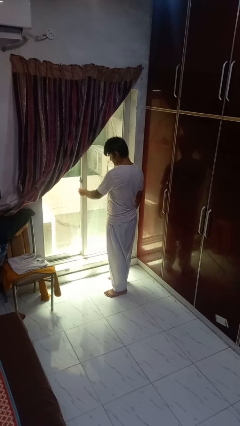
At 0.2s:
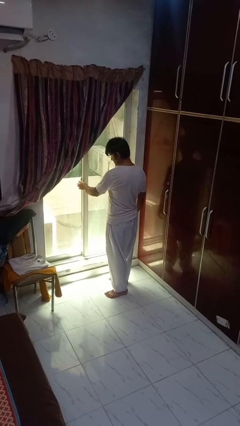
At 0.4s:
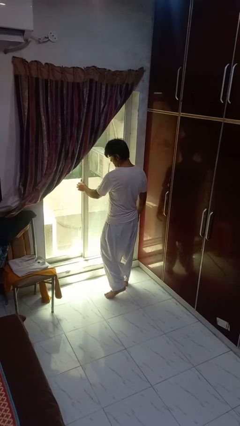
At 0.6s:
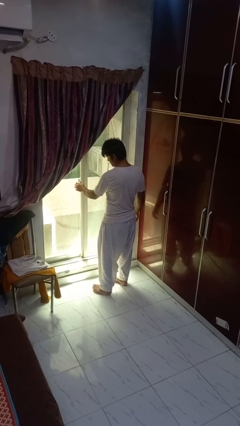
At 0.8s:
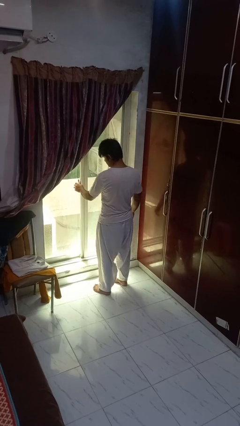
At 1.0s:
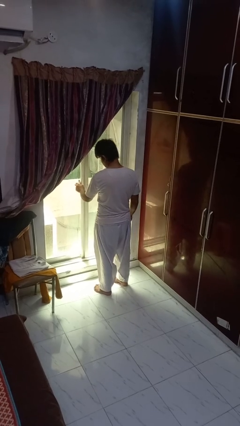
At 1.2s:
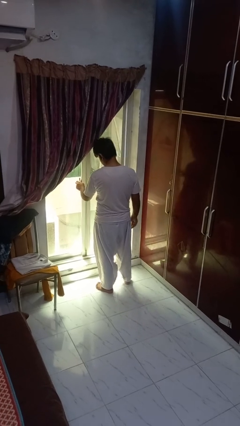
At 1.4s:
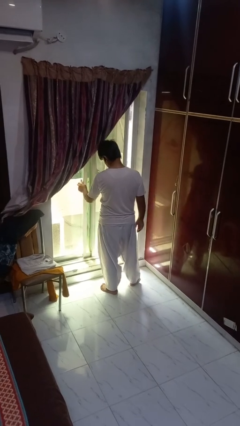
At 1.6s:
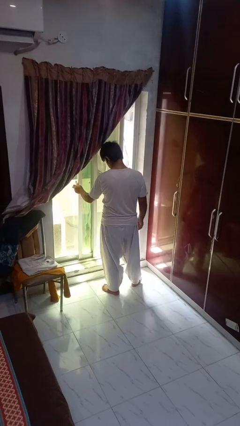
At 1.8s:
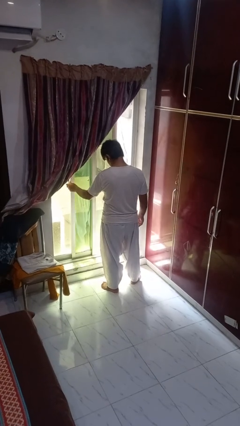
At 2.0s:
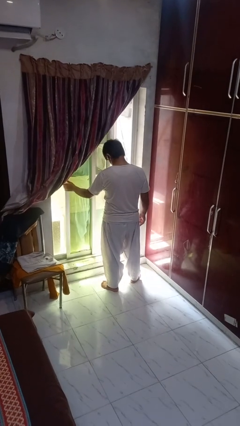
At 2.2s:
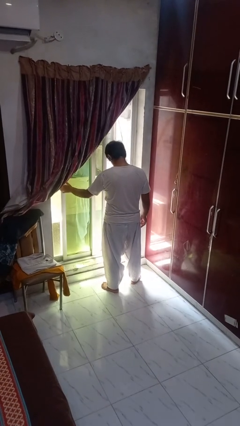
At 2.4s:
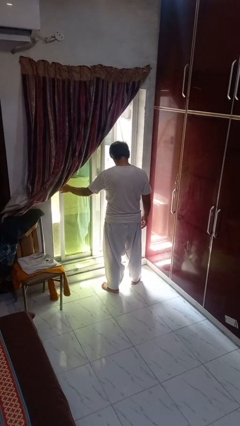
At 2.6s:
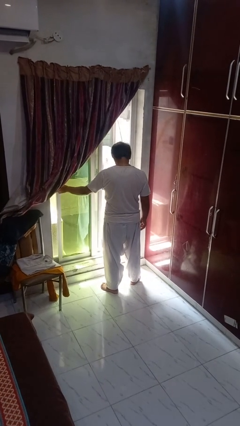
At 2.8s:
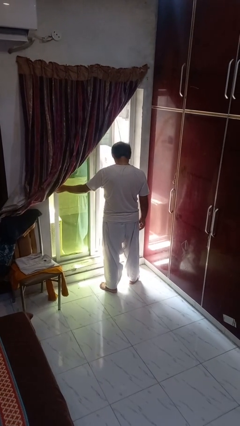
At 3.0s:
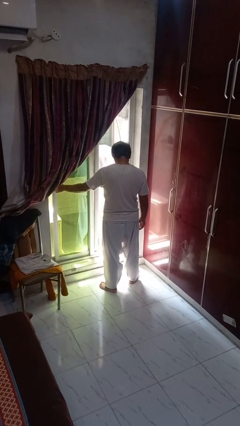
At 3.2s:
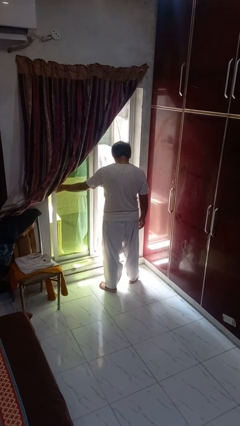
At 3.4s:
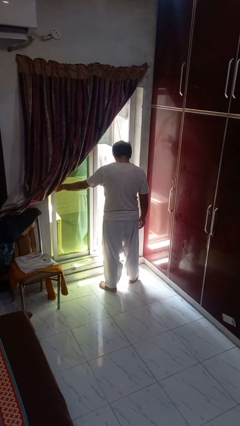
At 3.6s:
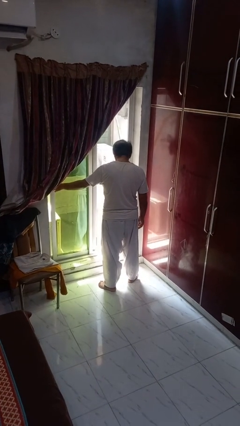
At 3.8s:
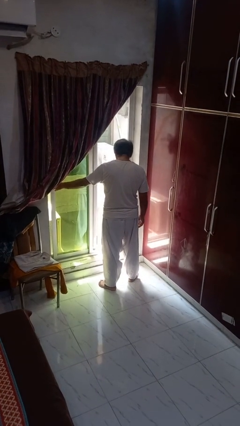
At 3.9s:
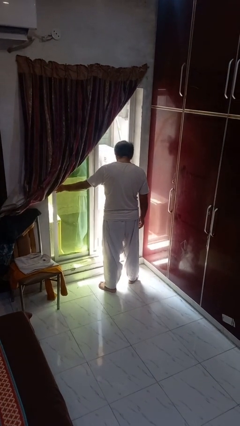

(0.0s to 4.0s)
person opens home window

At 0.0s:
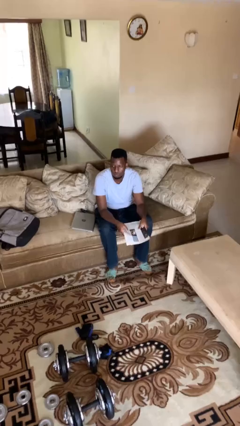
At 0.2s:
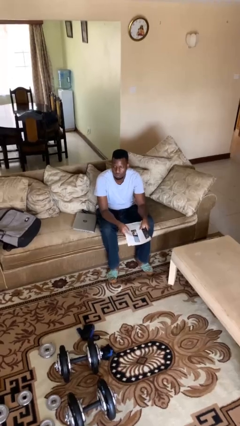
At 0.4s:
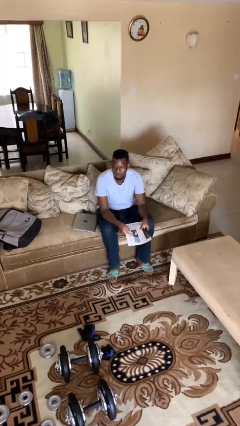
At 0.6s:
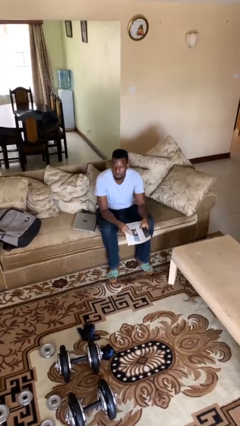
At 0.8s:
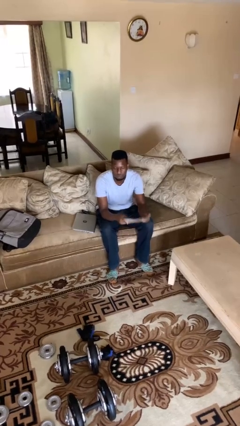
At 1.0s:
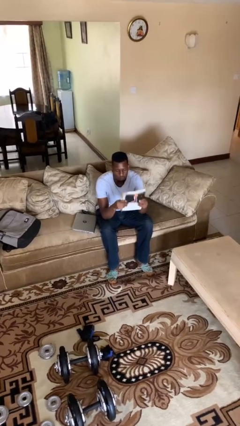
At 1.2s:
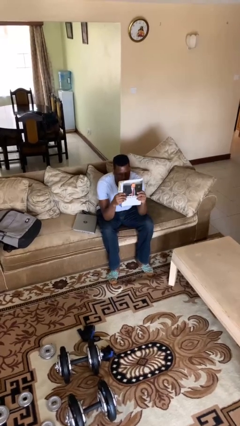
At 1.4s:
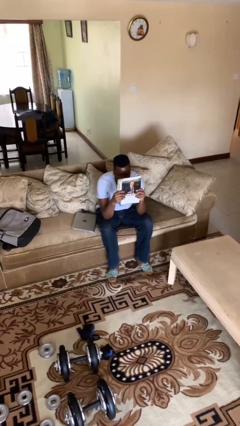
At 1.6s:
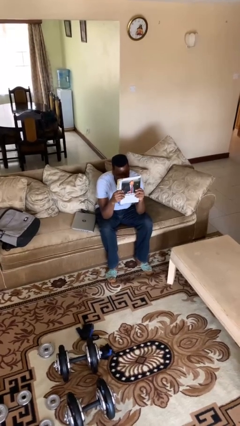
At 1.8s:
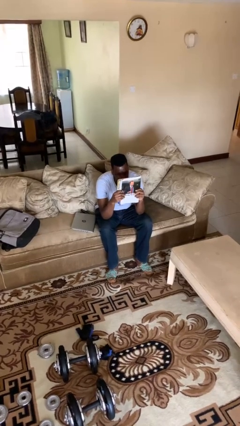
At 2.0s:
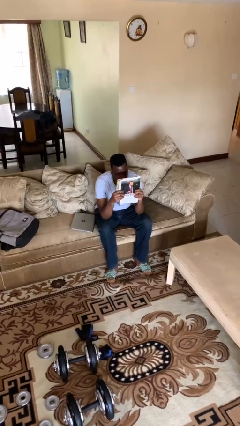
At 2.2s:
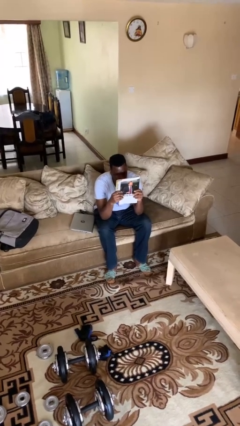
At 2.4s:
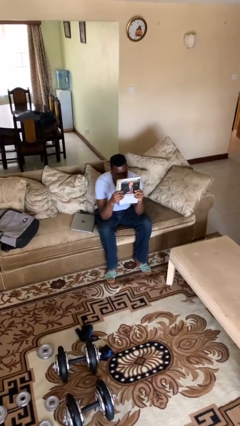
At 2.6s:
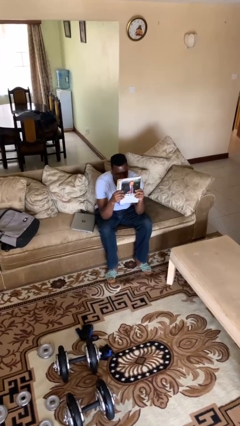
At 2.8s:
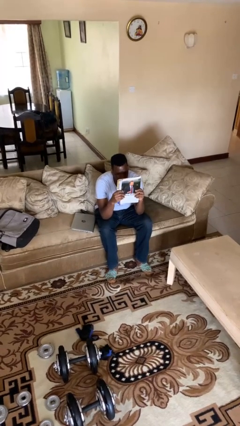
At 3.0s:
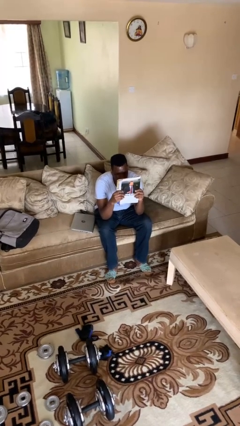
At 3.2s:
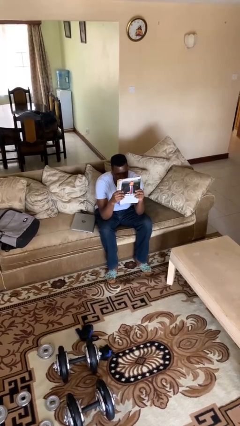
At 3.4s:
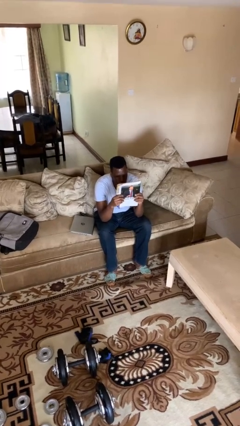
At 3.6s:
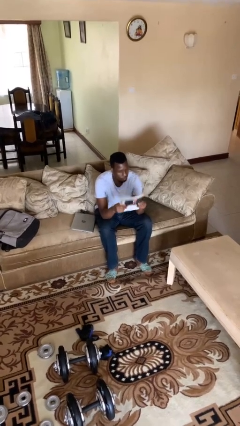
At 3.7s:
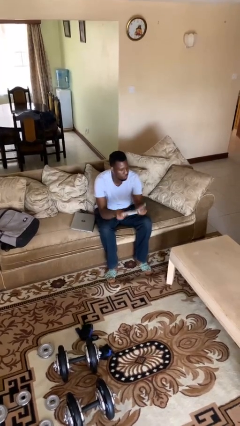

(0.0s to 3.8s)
person reads document

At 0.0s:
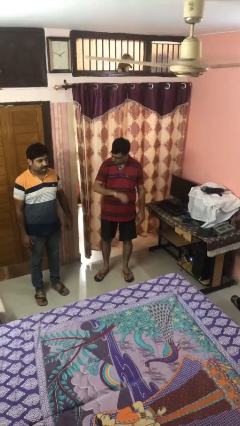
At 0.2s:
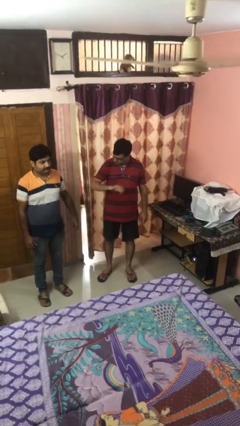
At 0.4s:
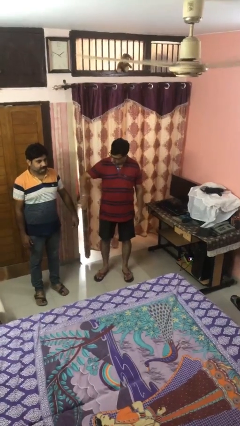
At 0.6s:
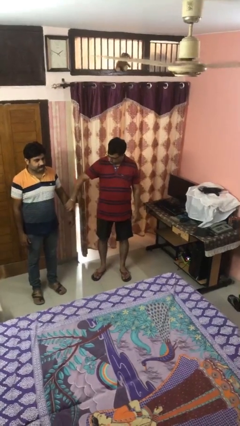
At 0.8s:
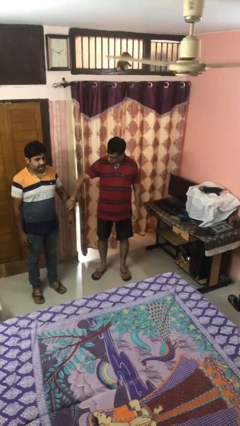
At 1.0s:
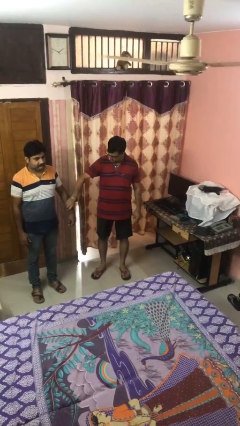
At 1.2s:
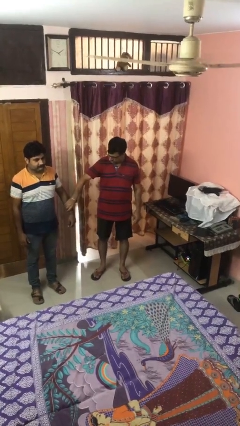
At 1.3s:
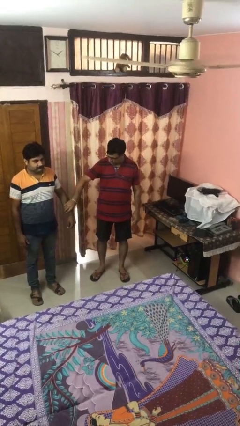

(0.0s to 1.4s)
person grabs person by forearm

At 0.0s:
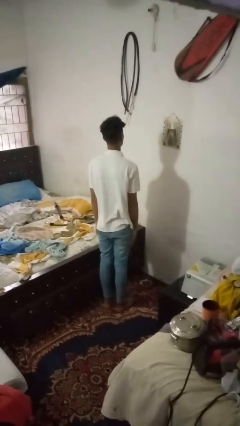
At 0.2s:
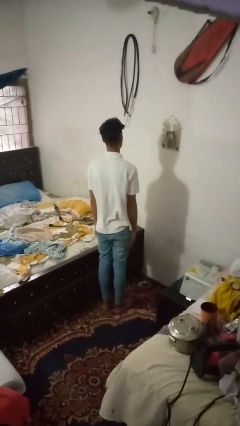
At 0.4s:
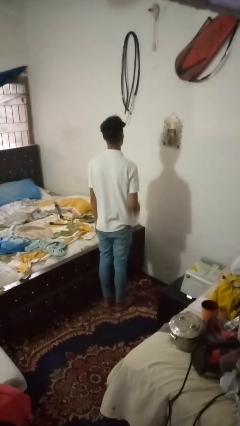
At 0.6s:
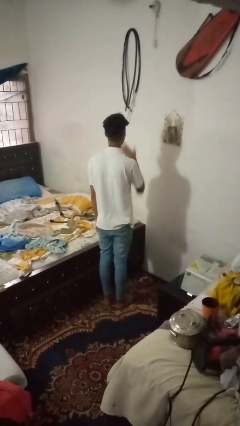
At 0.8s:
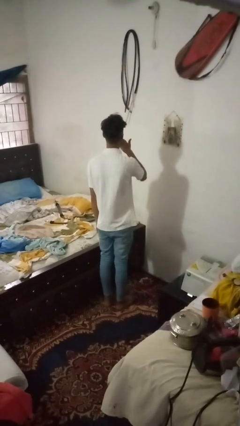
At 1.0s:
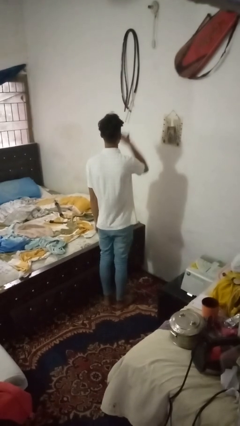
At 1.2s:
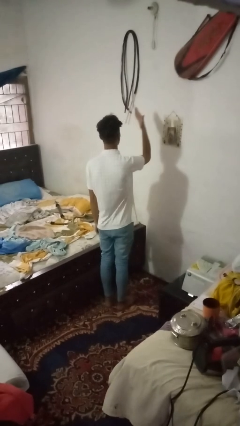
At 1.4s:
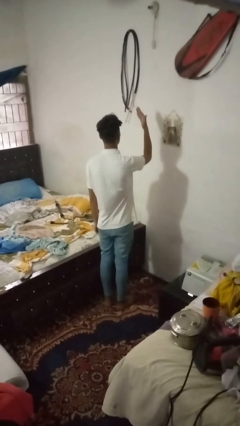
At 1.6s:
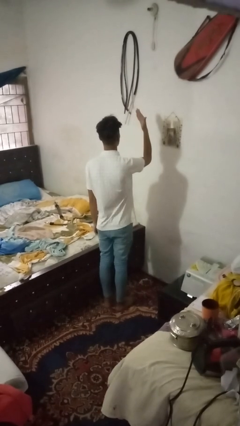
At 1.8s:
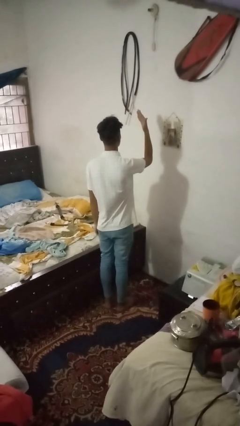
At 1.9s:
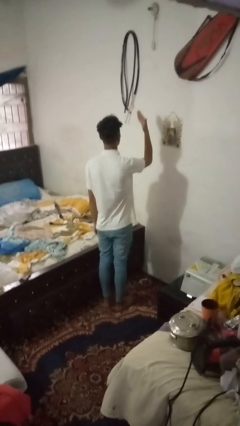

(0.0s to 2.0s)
person gestures blow kiss

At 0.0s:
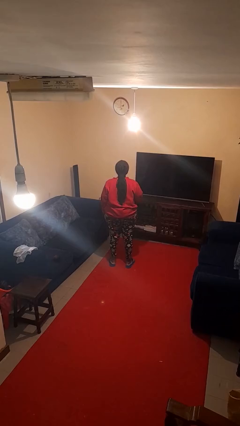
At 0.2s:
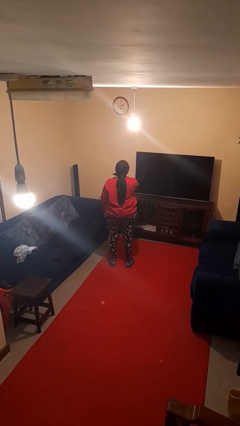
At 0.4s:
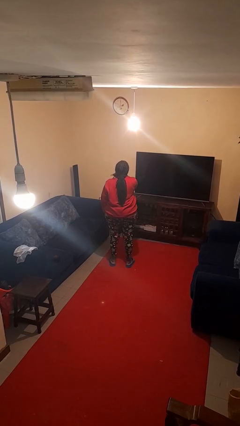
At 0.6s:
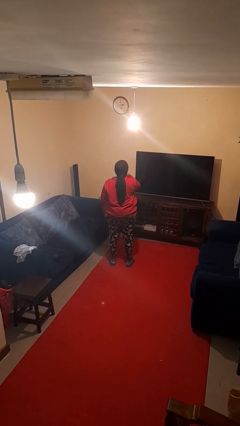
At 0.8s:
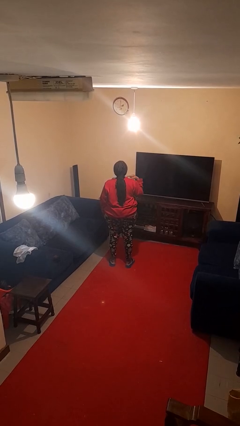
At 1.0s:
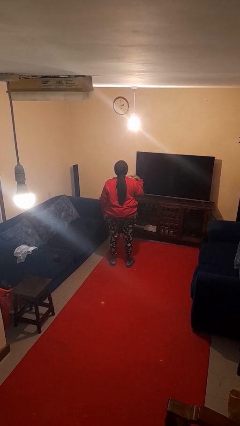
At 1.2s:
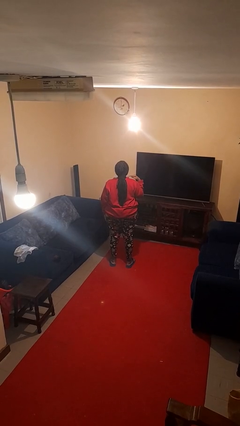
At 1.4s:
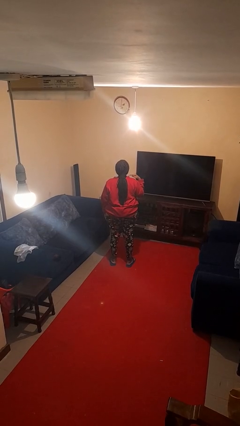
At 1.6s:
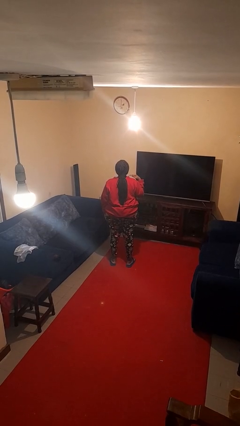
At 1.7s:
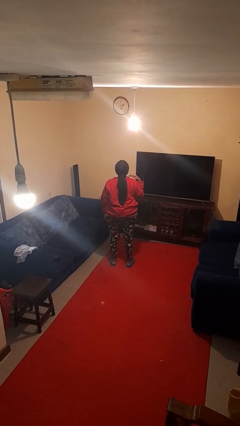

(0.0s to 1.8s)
person gestures cut

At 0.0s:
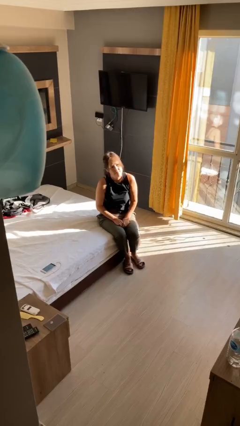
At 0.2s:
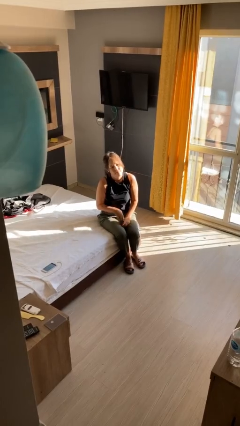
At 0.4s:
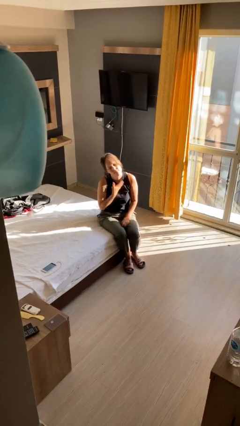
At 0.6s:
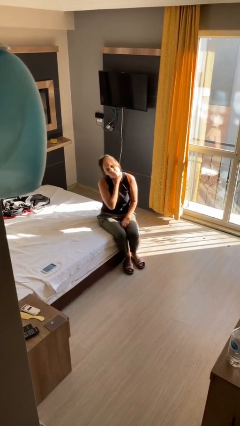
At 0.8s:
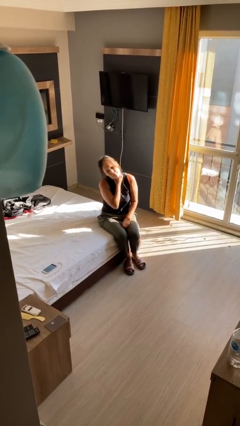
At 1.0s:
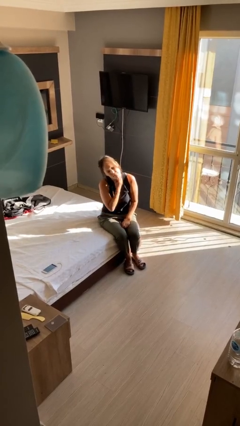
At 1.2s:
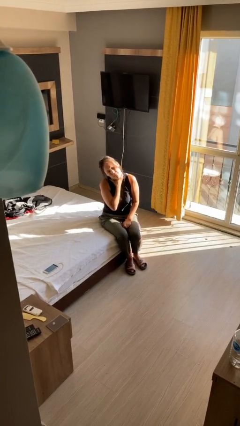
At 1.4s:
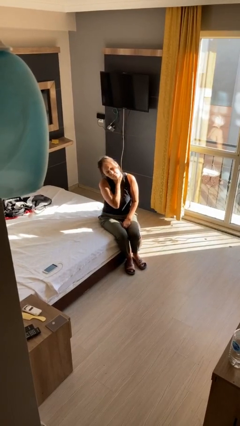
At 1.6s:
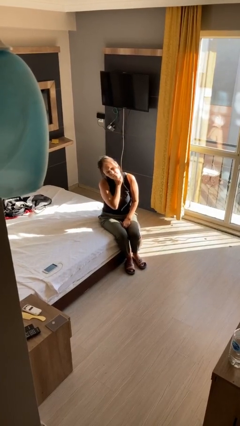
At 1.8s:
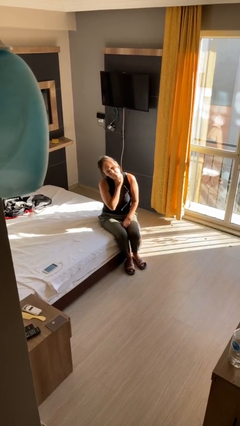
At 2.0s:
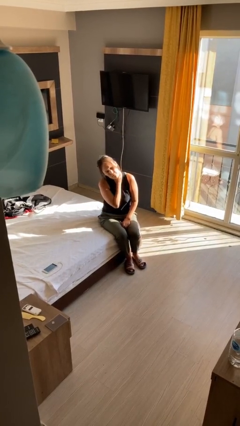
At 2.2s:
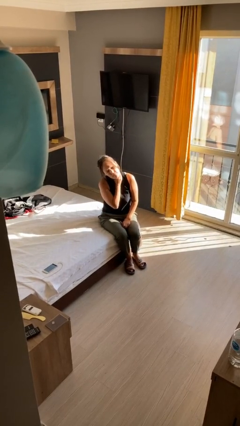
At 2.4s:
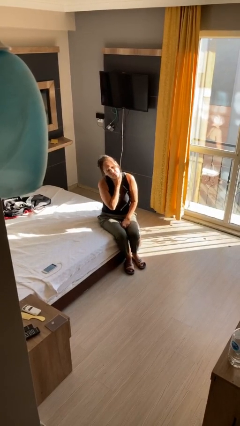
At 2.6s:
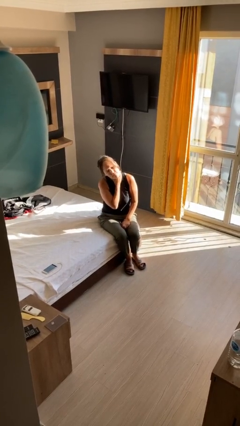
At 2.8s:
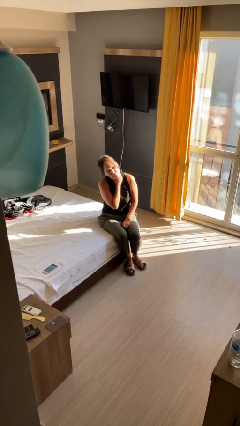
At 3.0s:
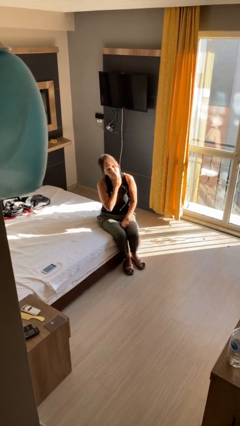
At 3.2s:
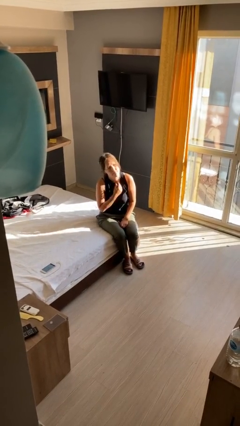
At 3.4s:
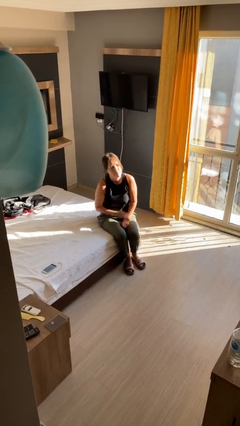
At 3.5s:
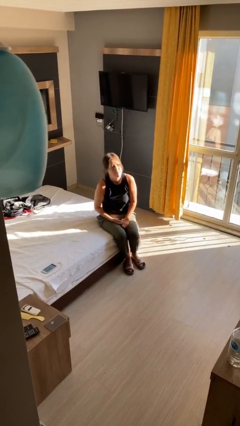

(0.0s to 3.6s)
person rubs neck

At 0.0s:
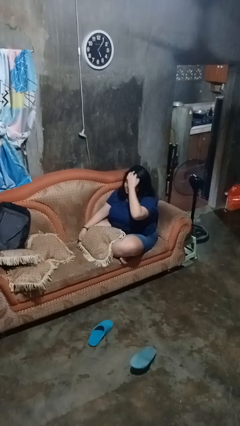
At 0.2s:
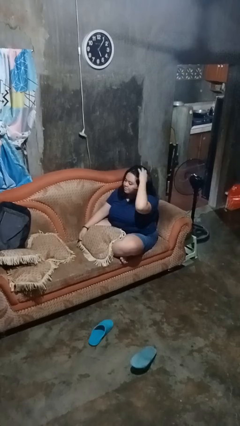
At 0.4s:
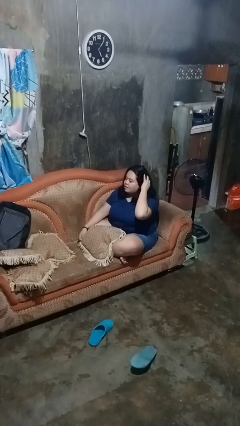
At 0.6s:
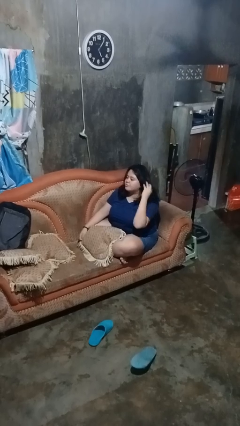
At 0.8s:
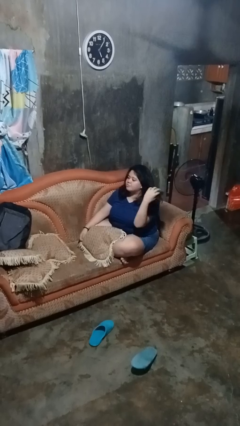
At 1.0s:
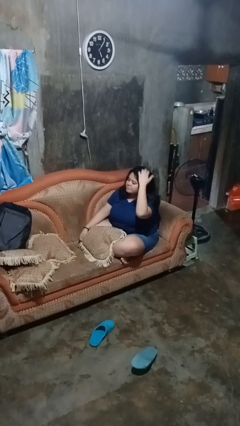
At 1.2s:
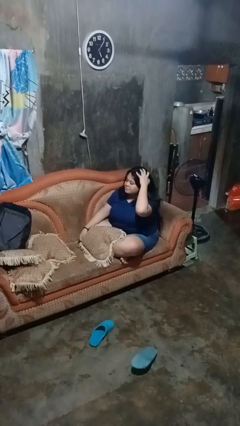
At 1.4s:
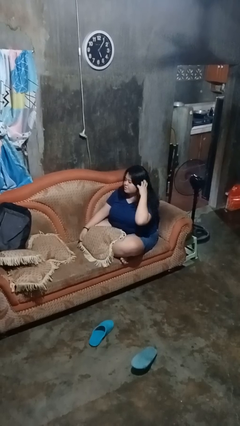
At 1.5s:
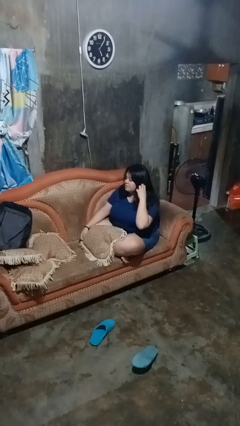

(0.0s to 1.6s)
person strokes hair
